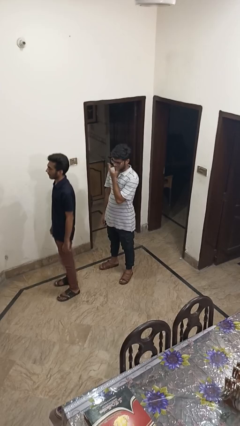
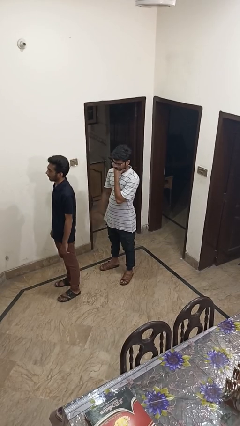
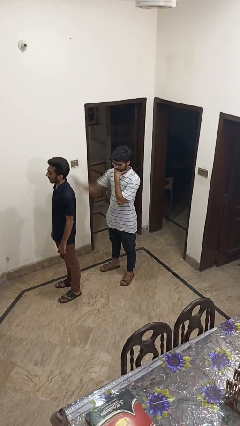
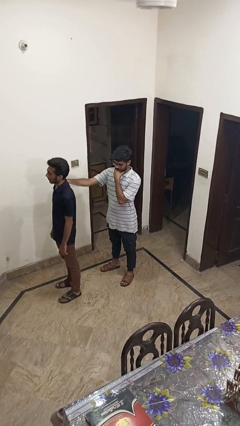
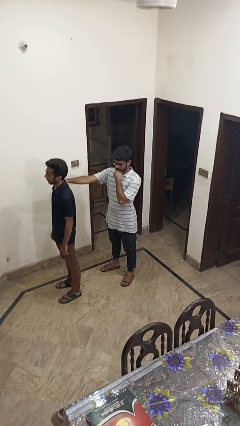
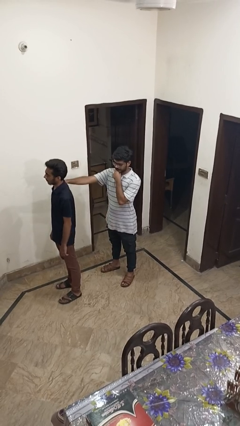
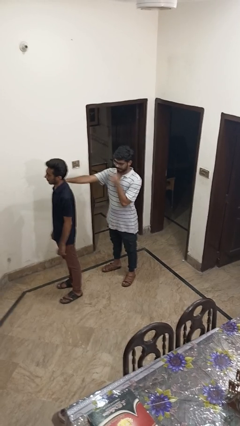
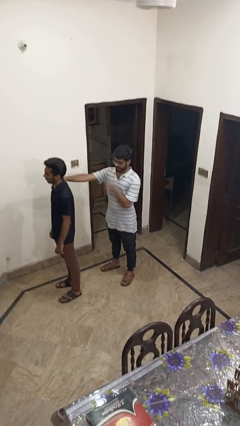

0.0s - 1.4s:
person grabs person by shoulder

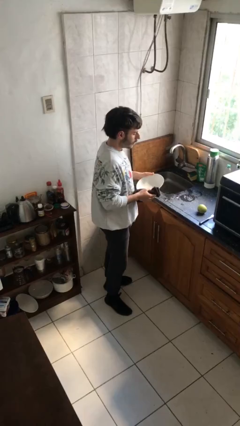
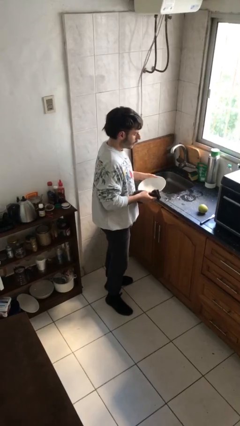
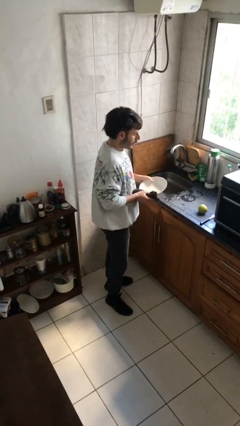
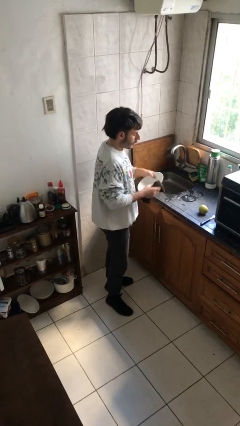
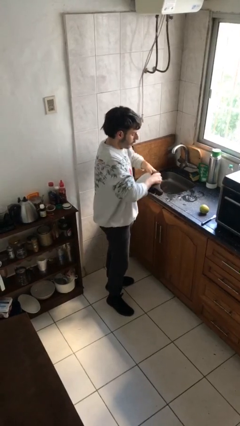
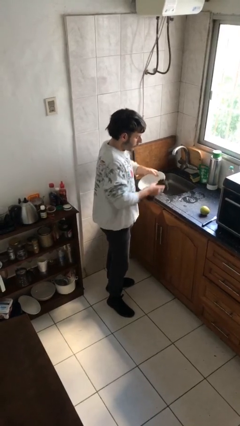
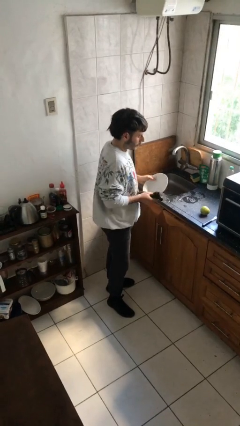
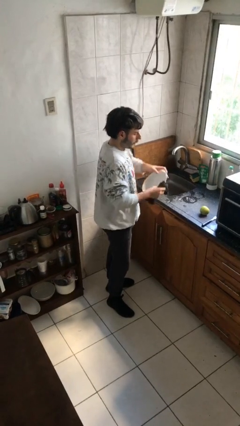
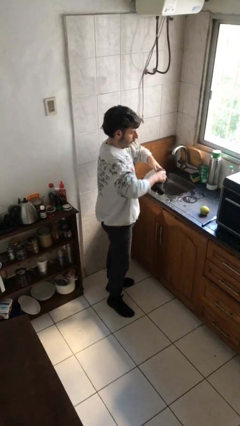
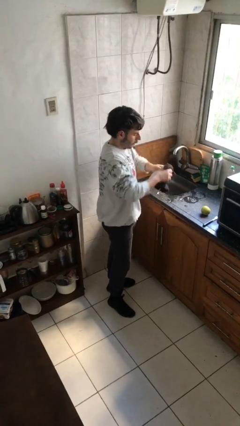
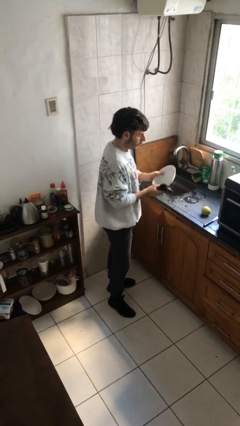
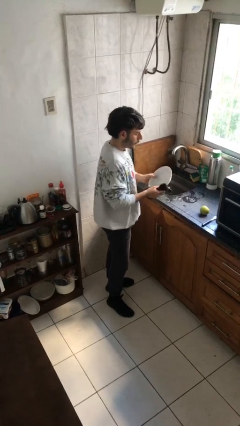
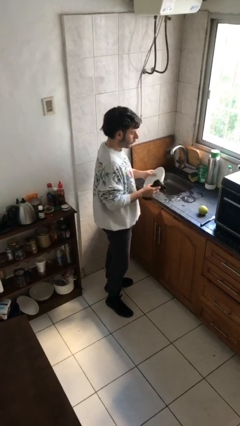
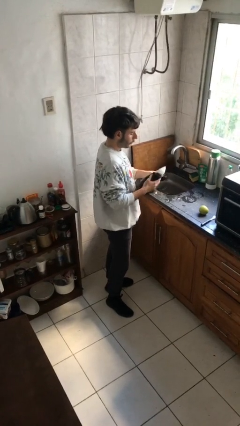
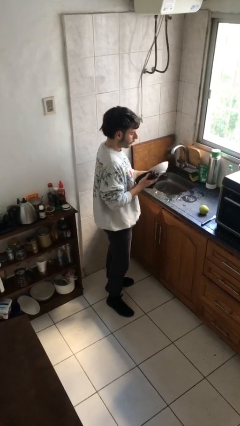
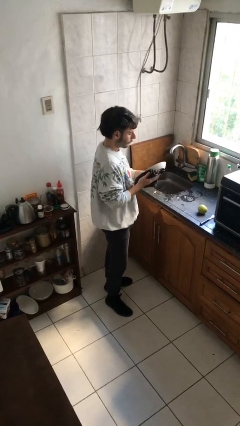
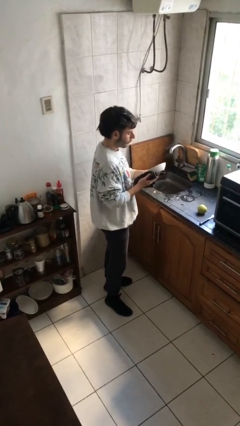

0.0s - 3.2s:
person dries dish

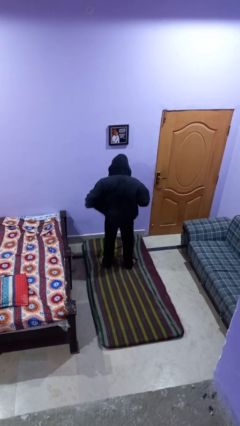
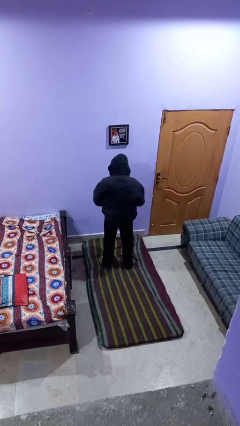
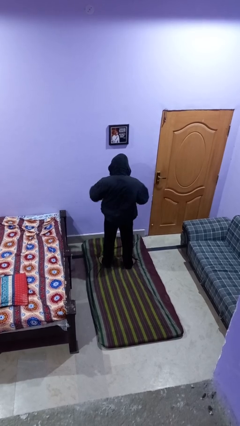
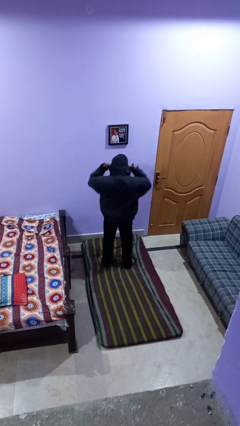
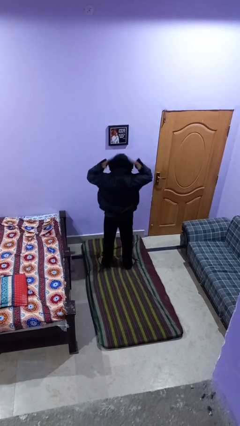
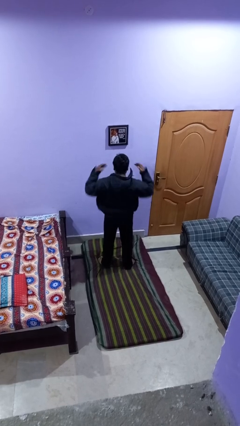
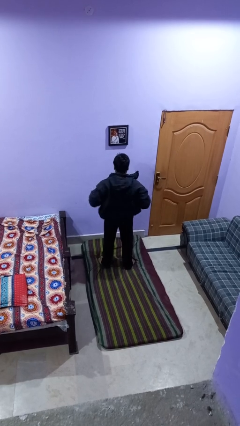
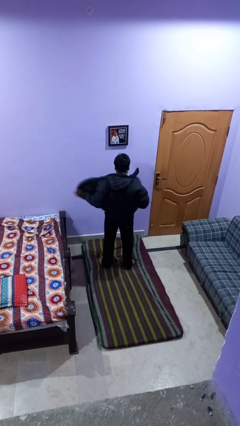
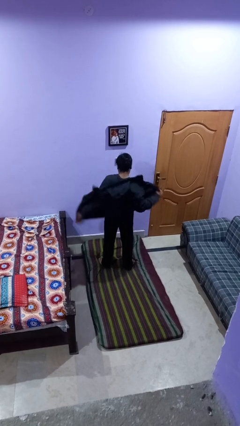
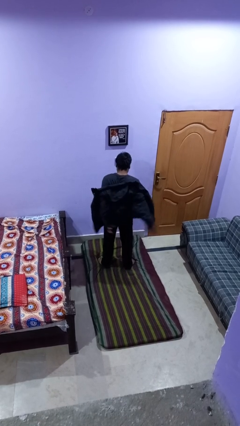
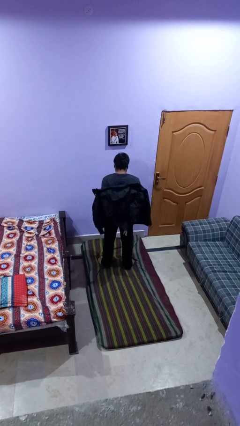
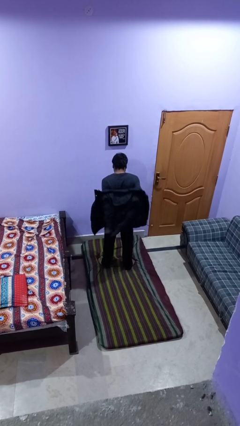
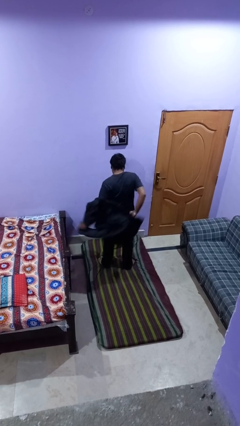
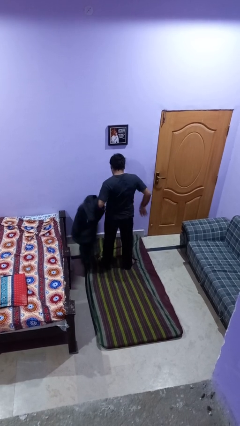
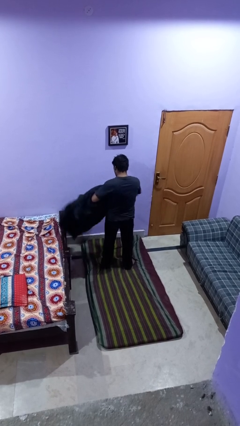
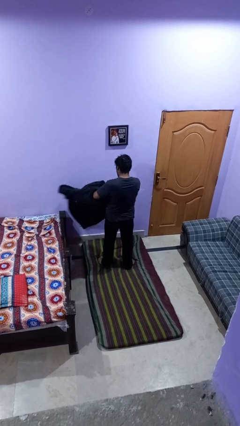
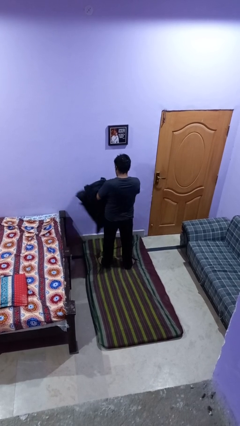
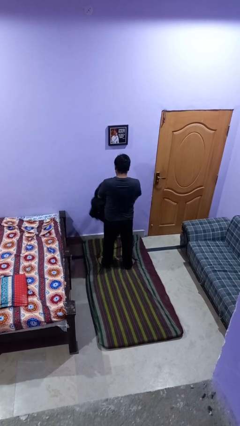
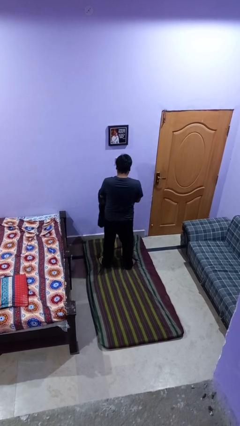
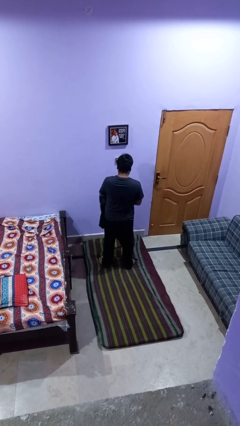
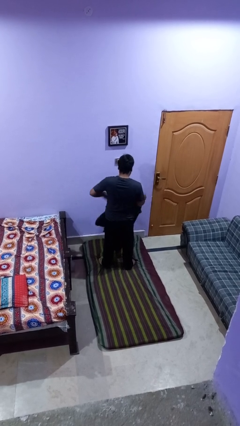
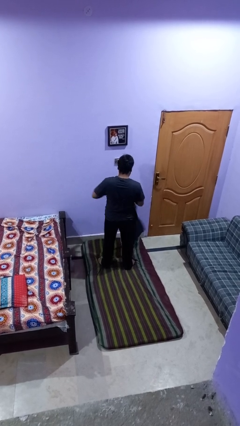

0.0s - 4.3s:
person takes off hoodie

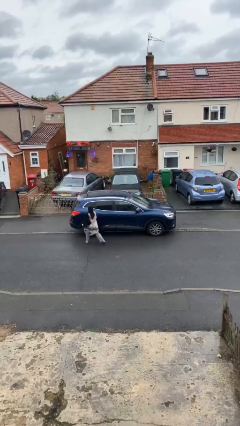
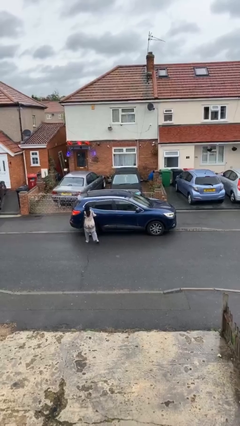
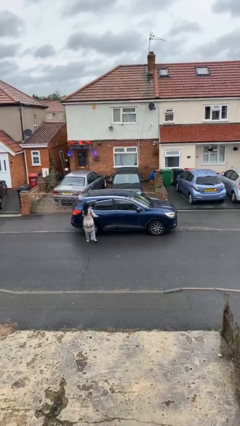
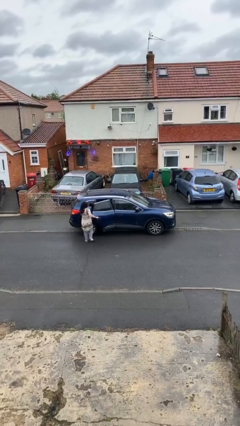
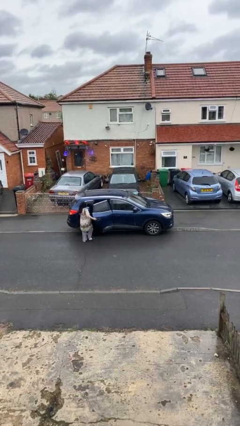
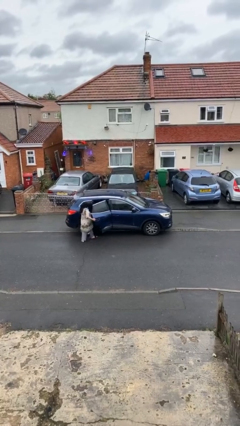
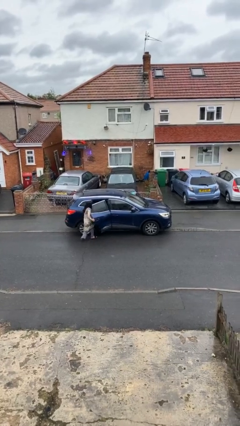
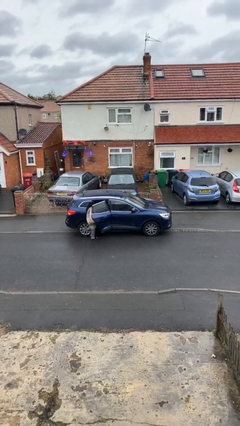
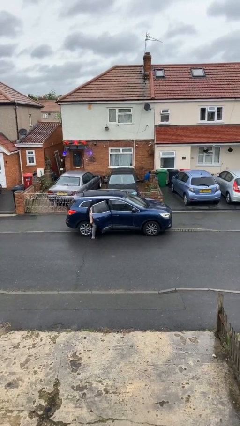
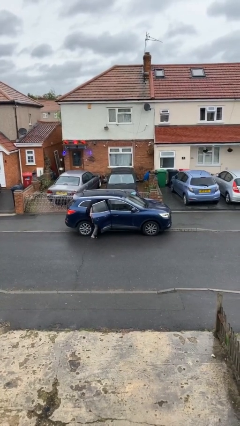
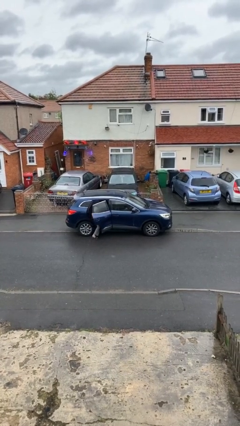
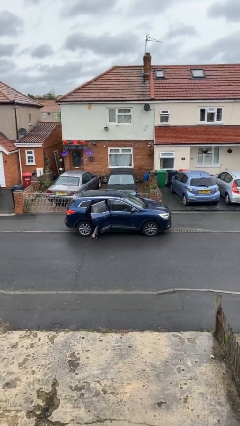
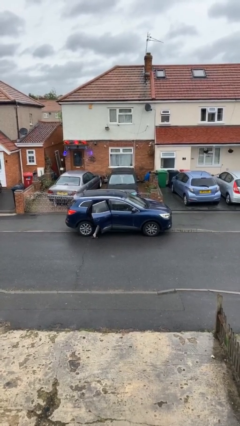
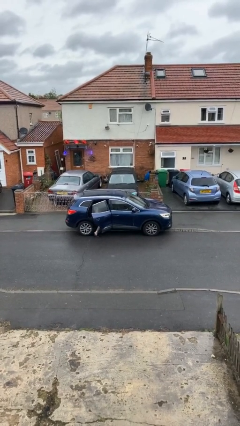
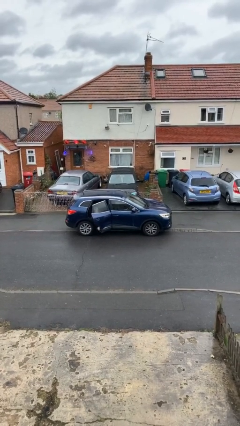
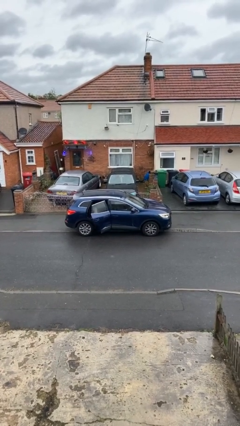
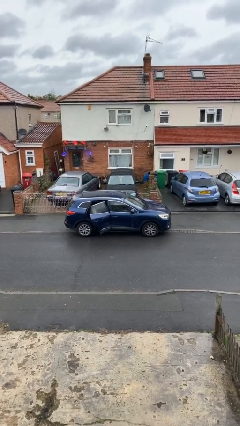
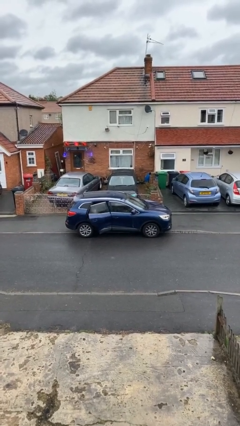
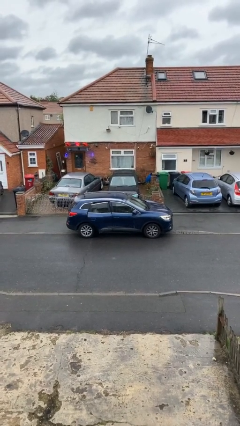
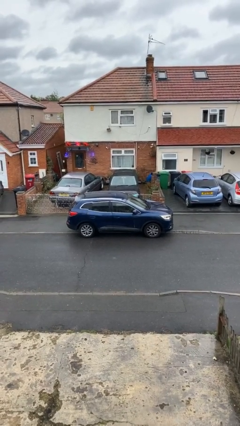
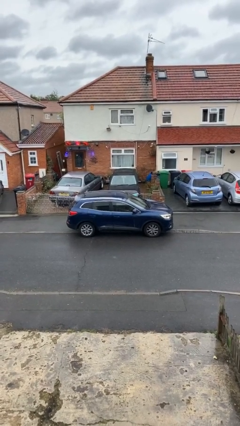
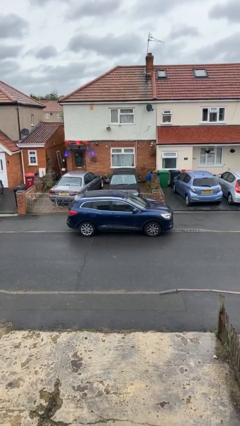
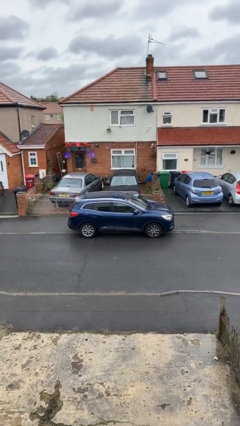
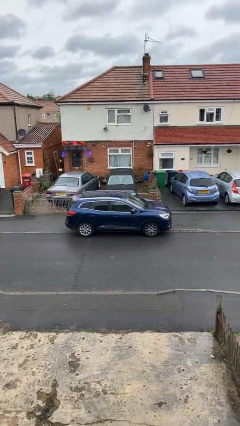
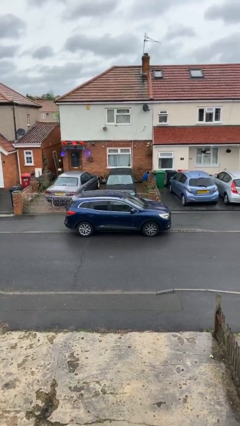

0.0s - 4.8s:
car picks up person

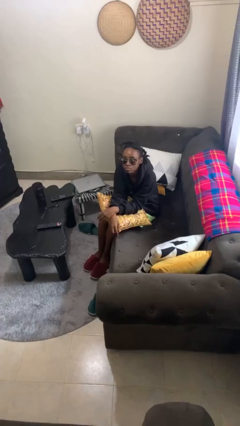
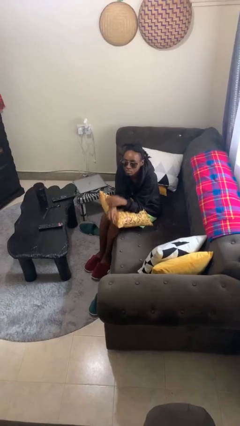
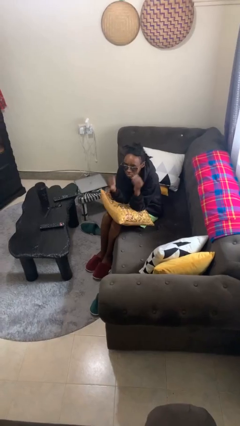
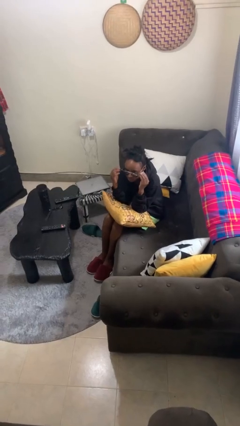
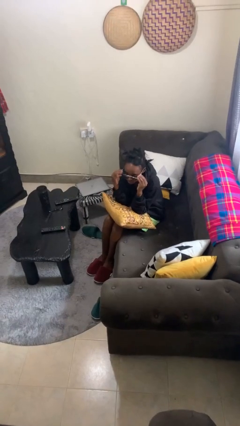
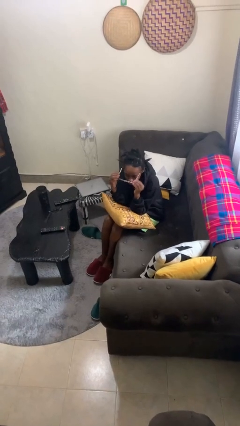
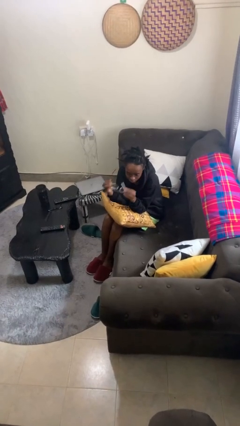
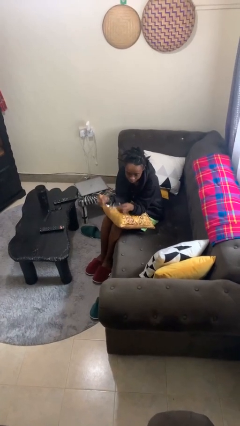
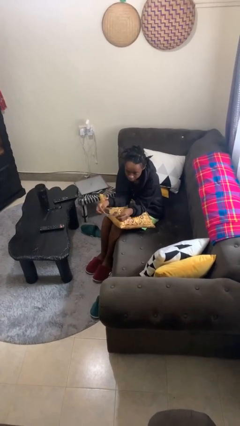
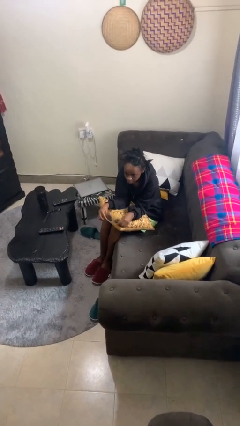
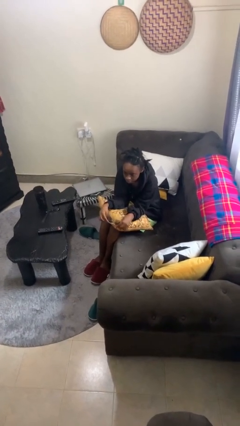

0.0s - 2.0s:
person takes off sunglasses

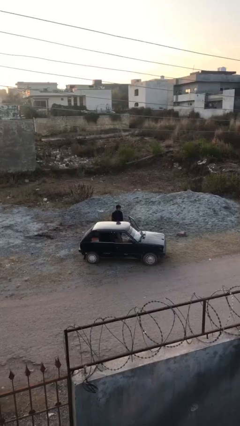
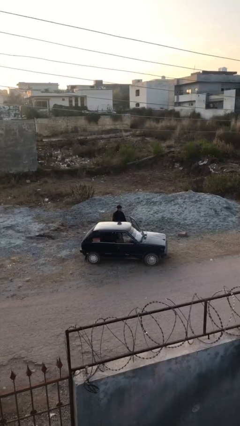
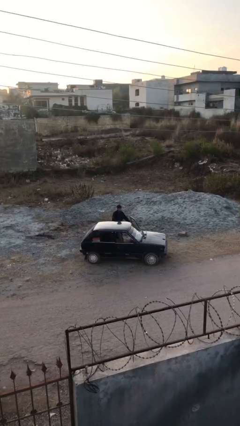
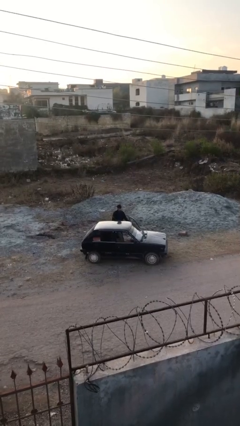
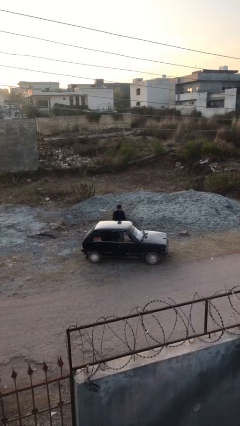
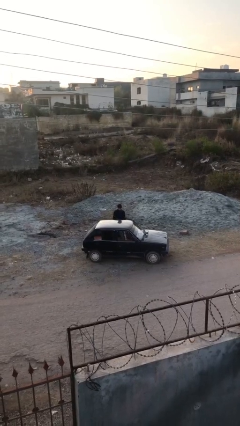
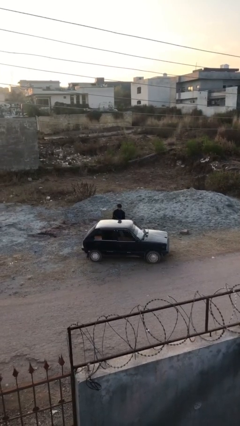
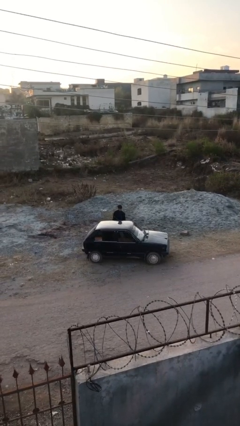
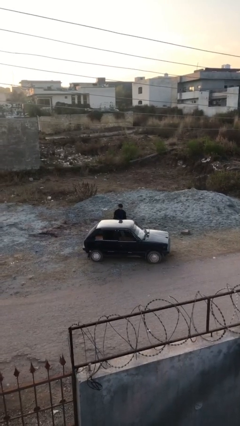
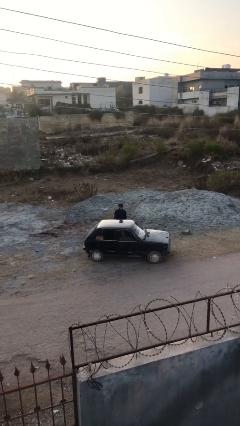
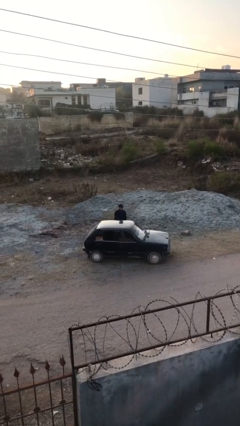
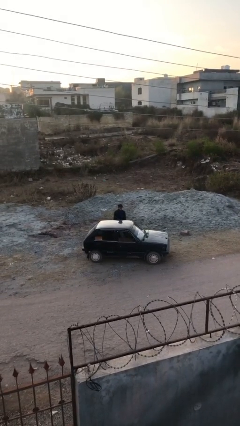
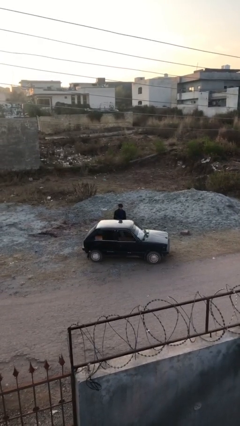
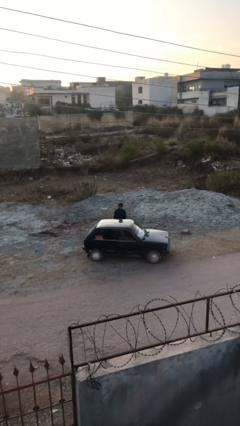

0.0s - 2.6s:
person closes car door
